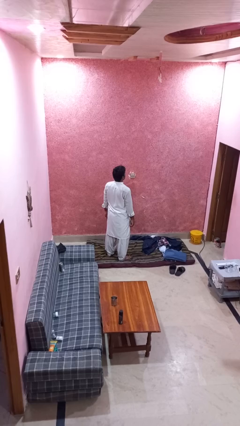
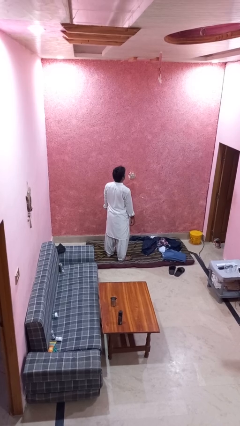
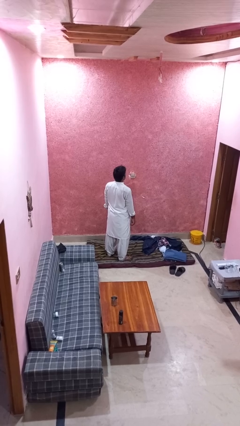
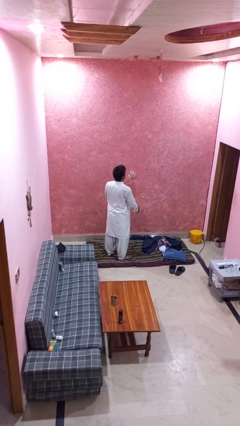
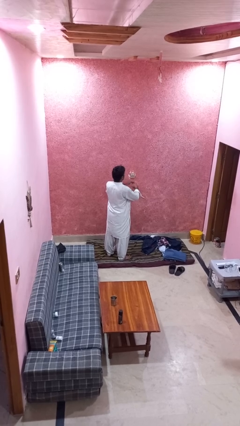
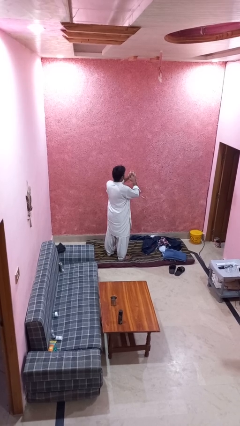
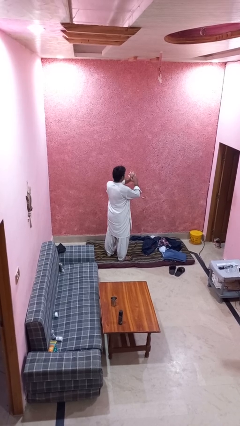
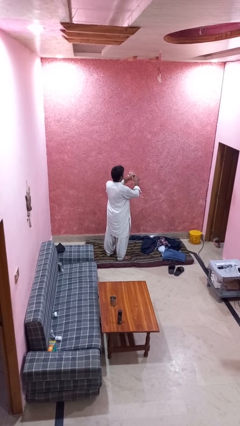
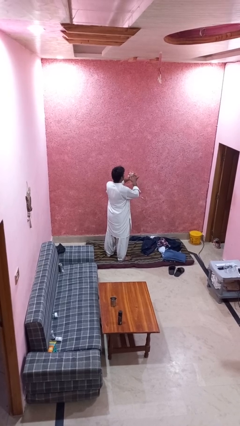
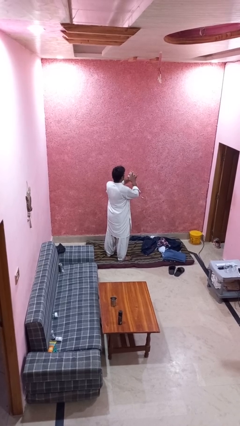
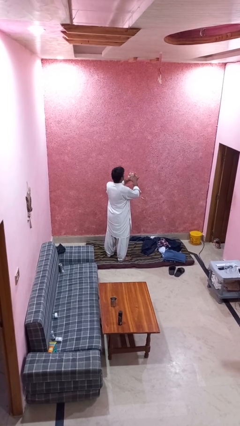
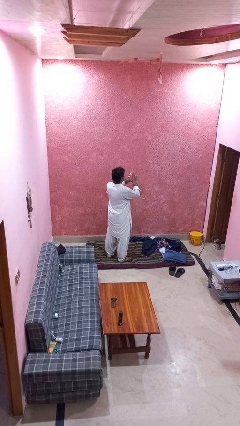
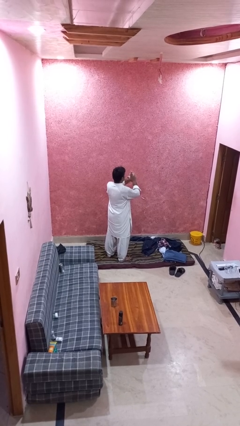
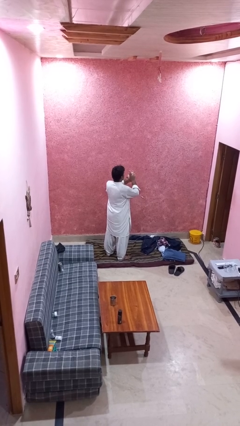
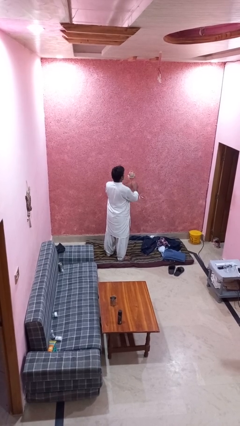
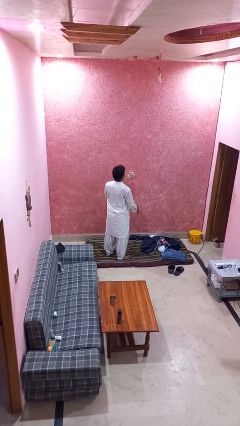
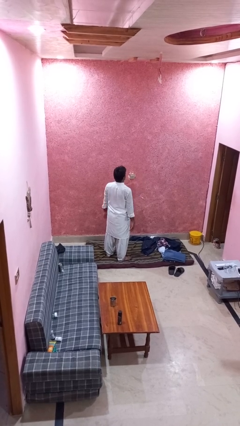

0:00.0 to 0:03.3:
person snaps fingers

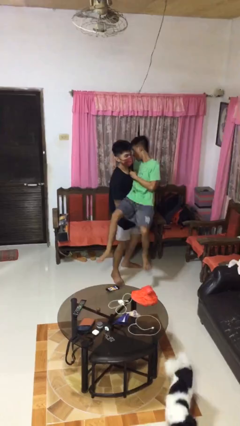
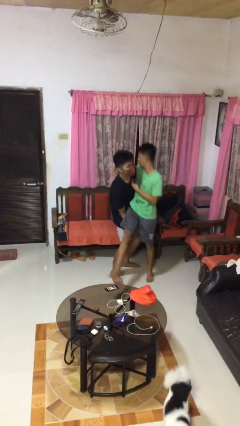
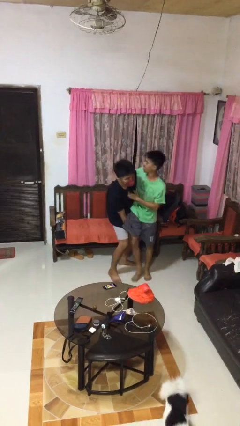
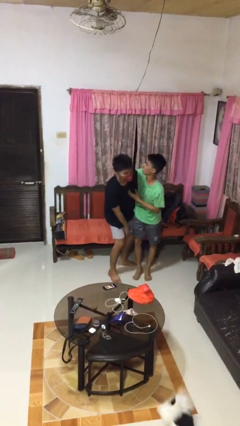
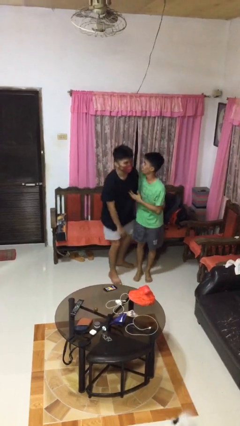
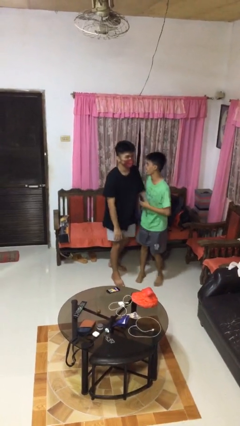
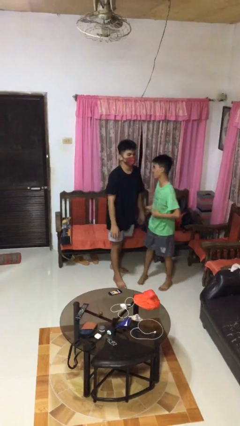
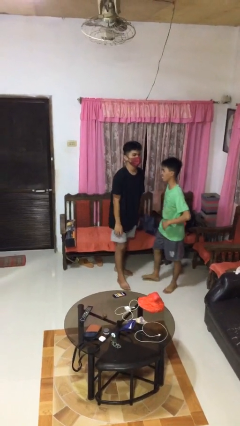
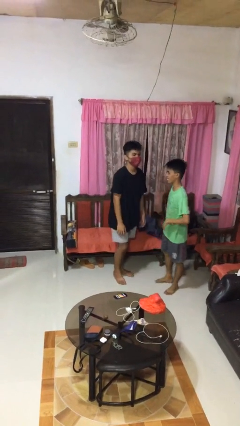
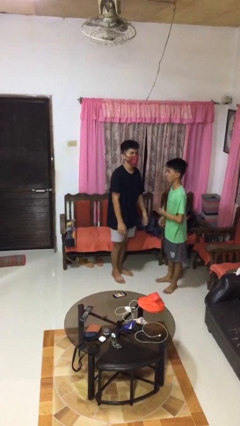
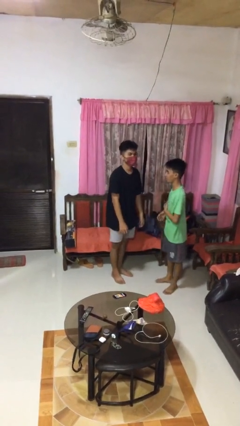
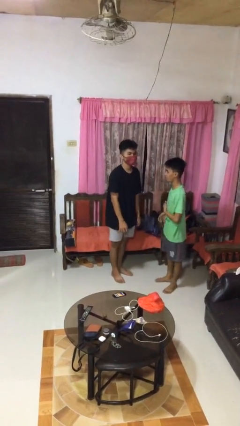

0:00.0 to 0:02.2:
person puts down person

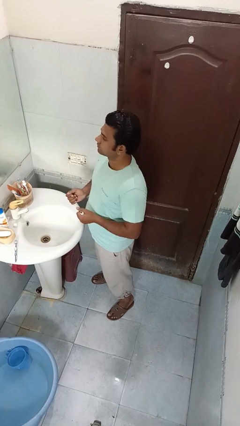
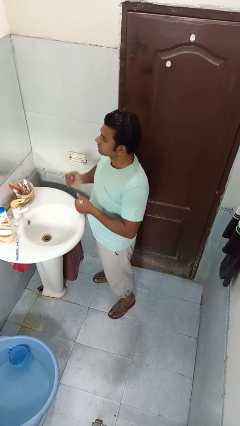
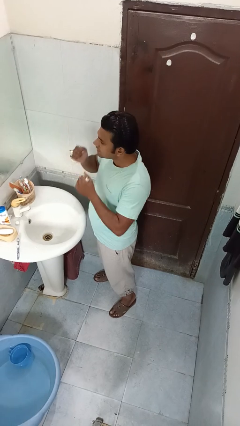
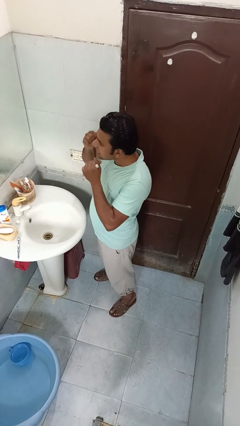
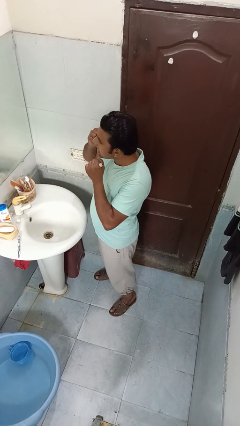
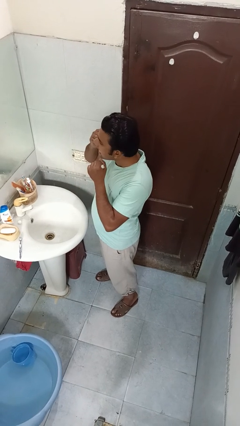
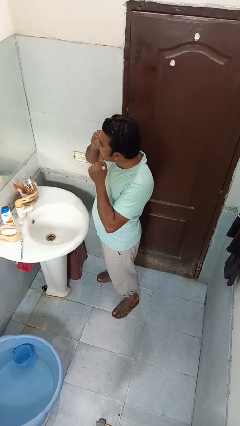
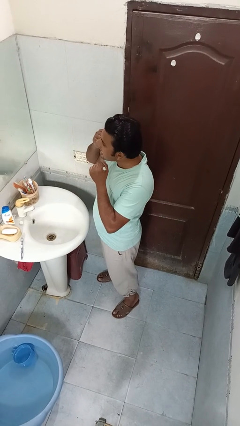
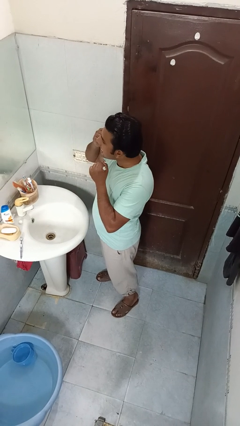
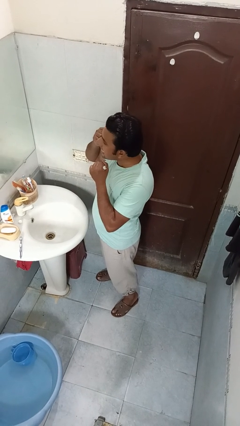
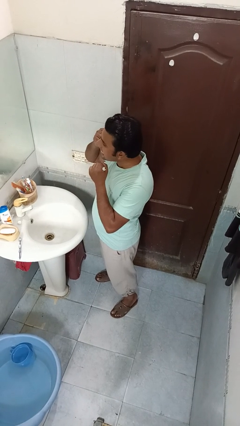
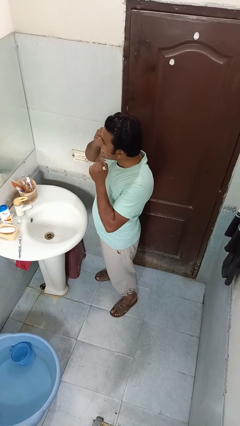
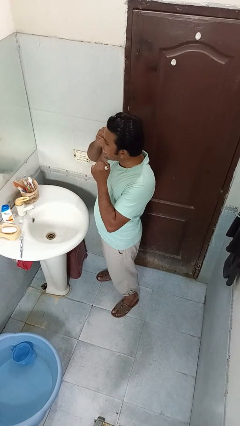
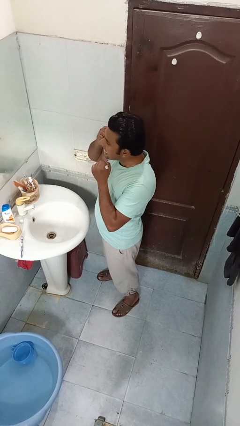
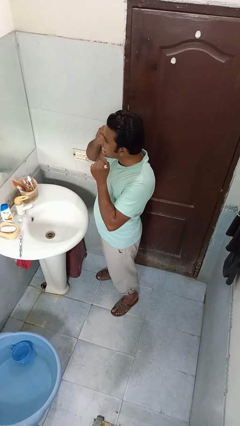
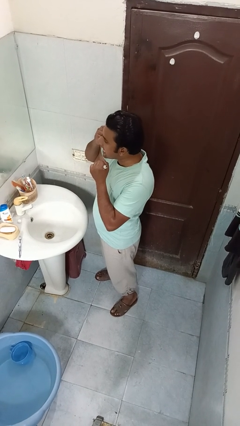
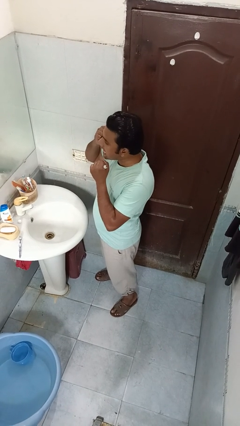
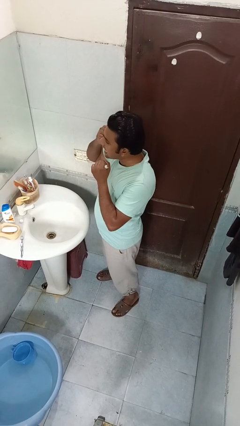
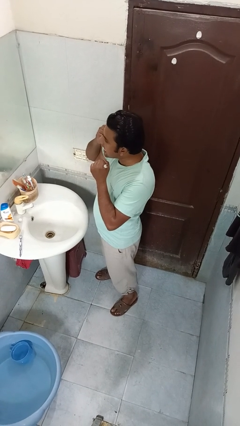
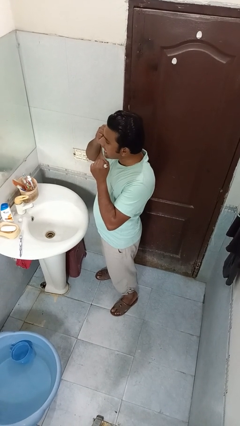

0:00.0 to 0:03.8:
person flosses

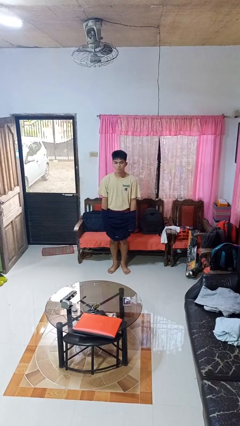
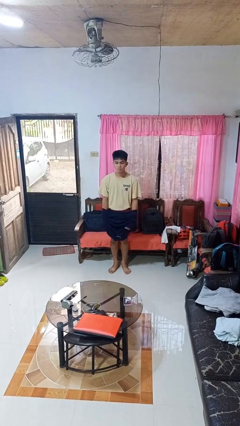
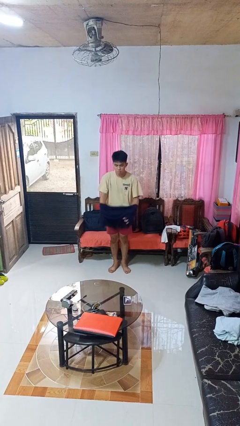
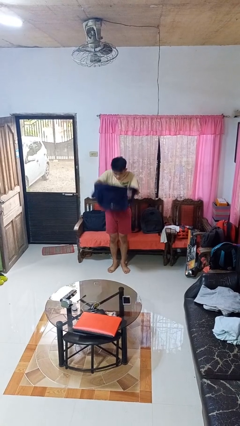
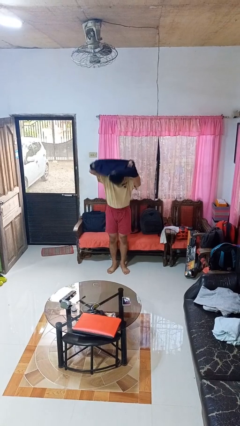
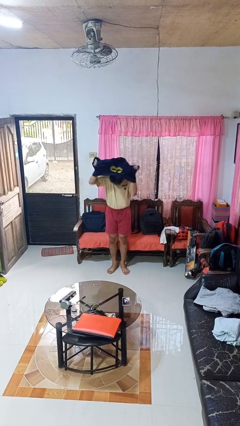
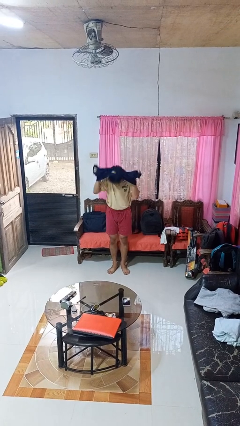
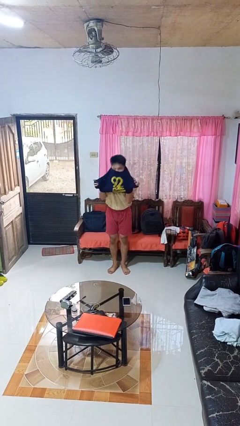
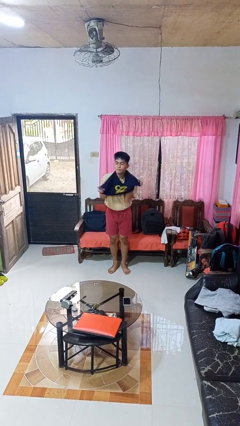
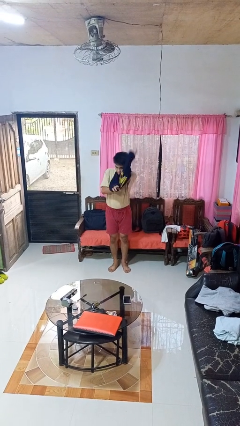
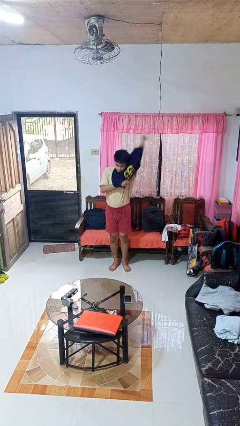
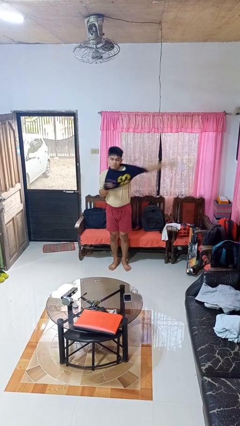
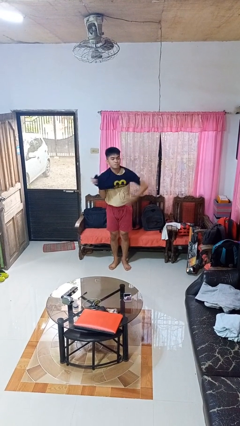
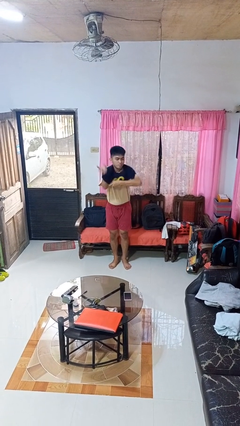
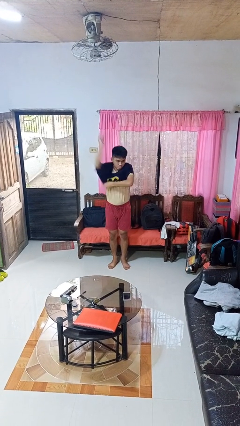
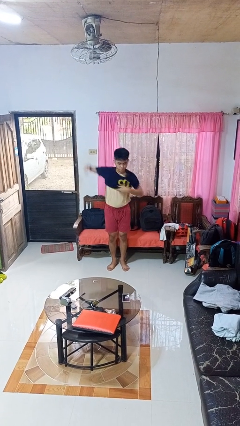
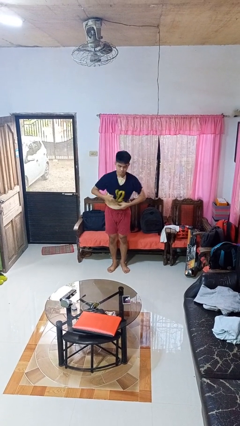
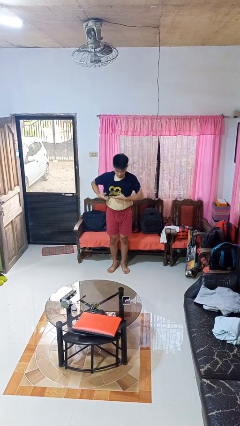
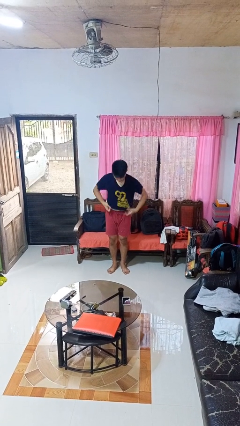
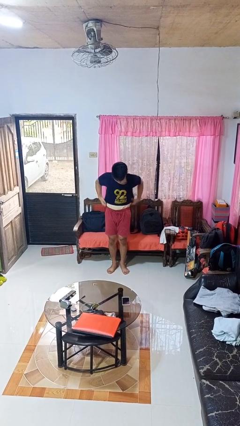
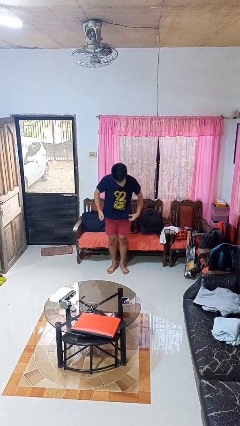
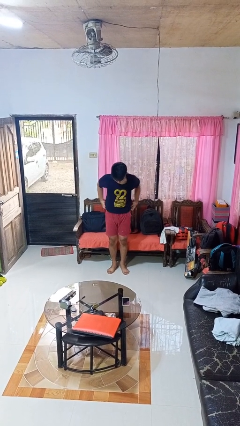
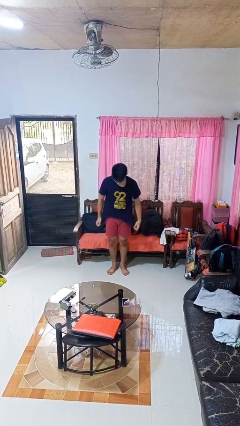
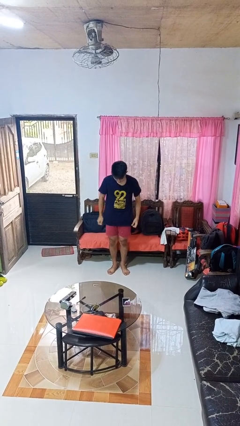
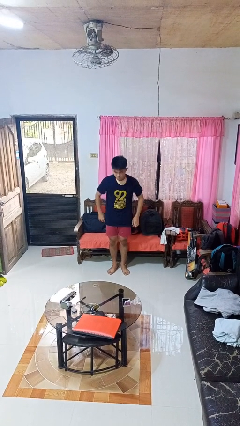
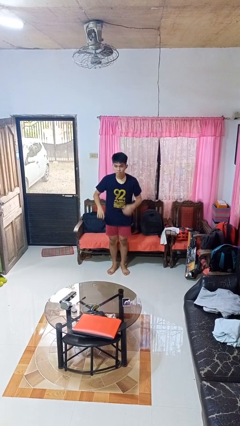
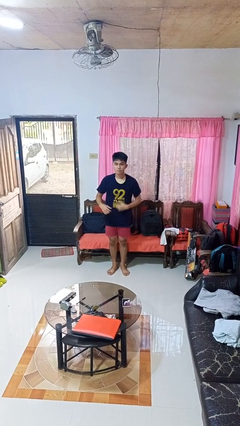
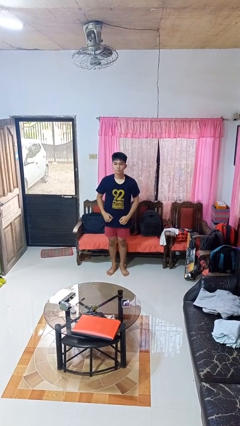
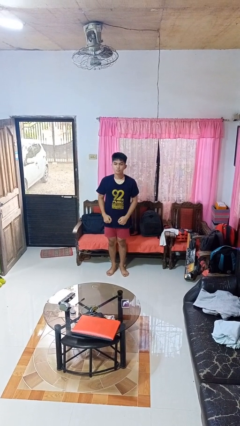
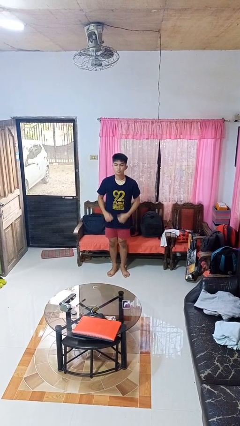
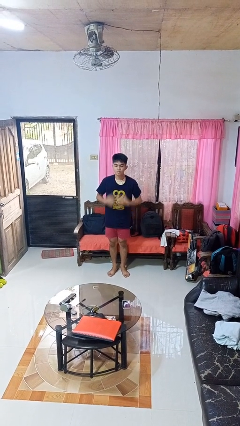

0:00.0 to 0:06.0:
person puts on shirt

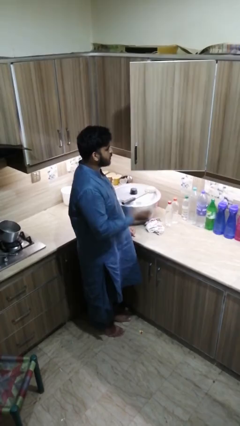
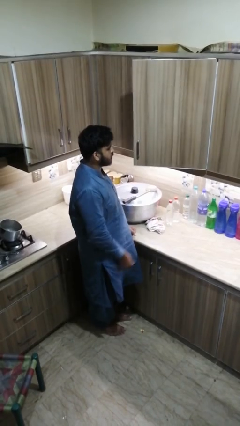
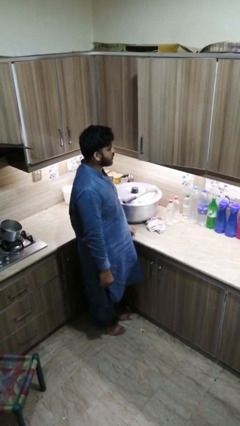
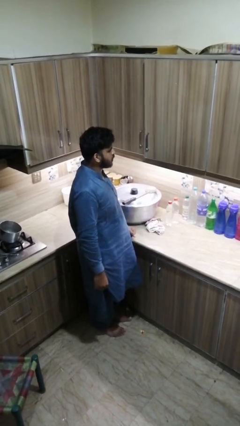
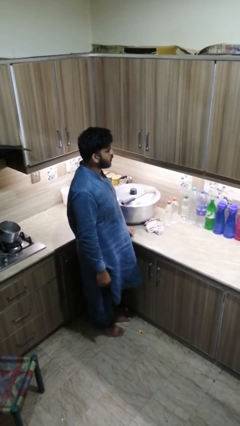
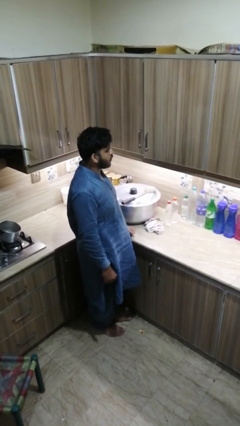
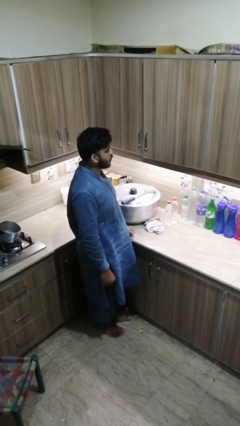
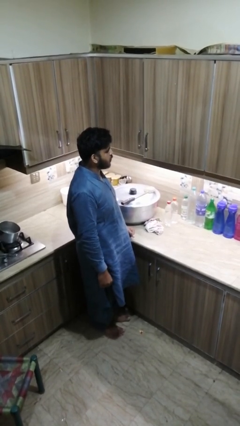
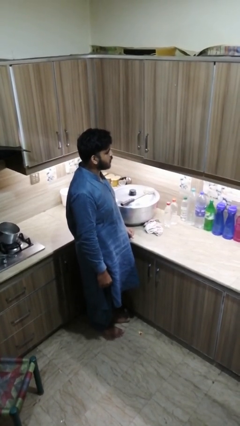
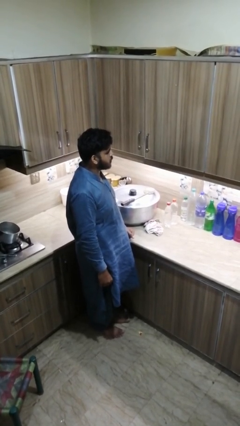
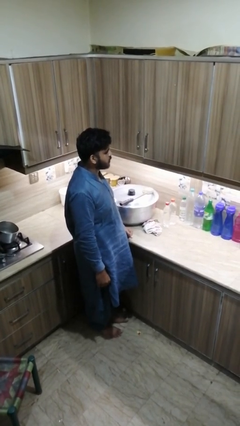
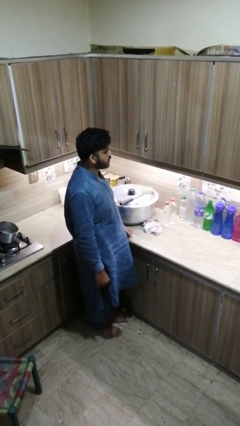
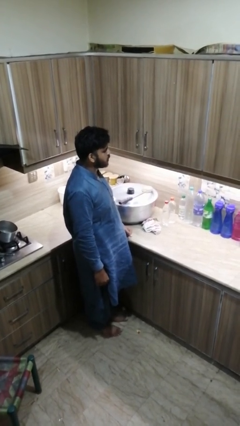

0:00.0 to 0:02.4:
person closes kitchen drawer
